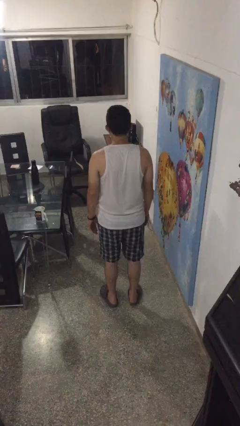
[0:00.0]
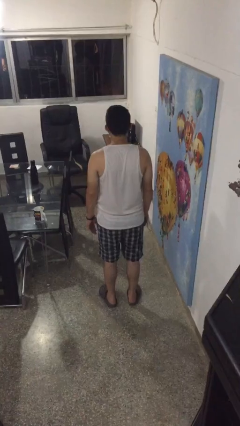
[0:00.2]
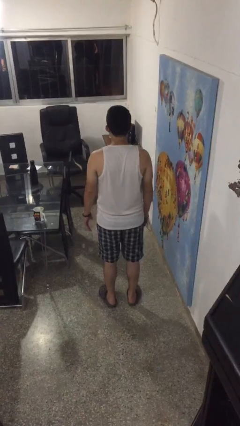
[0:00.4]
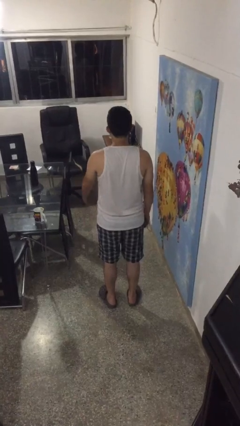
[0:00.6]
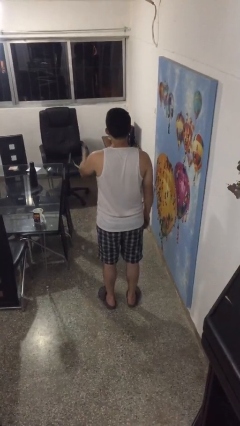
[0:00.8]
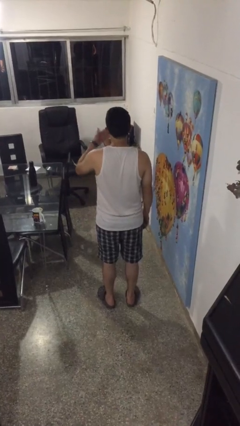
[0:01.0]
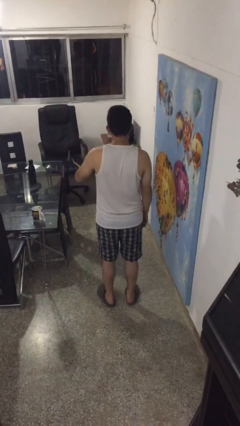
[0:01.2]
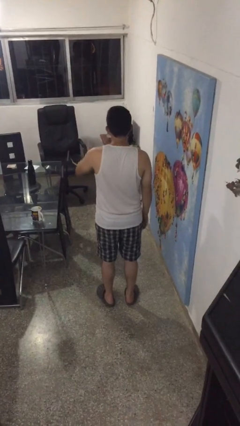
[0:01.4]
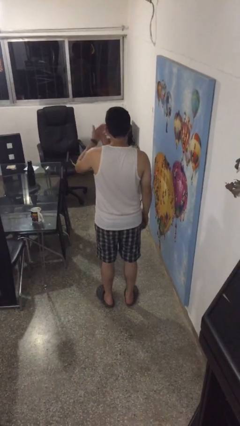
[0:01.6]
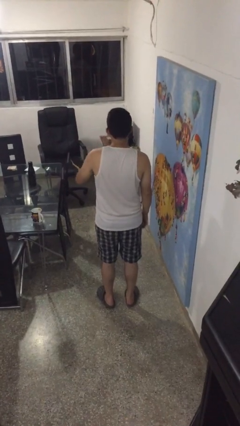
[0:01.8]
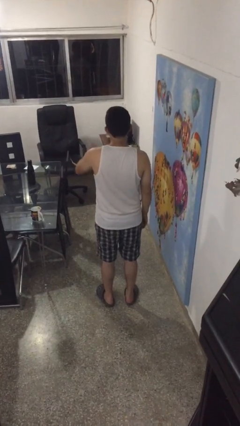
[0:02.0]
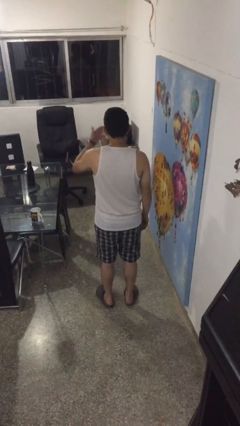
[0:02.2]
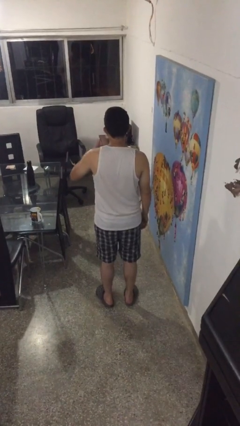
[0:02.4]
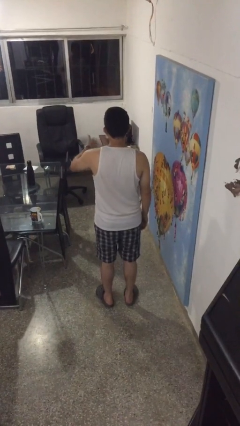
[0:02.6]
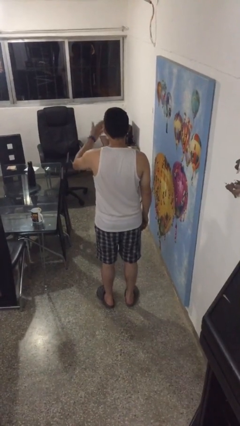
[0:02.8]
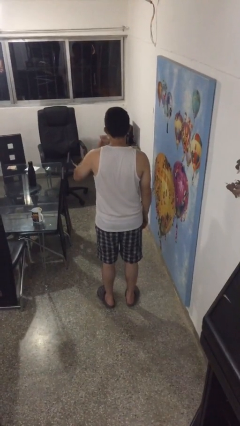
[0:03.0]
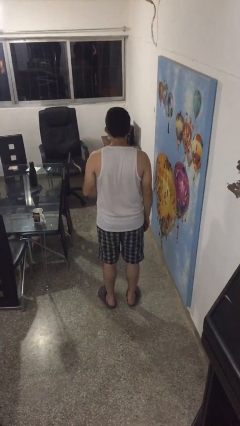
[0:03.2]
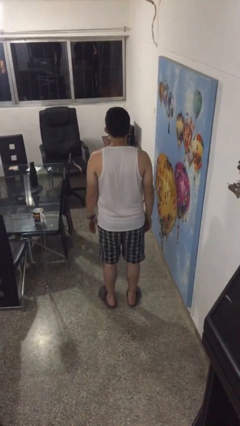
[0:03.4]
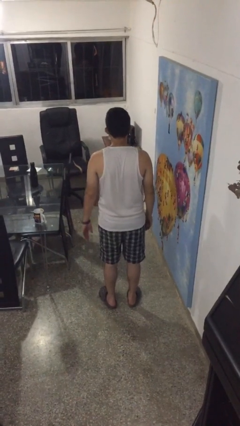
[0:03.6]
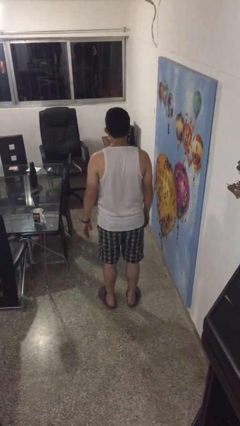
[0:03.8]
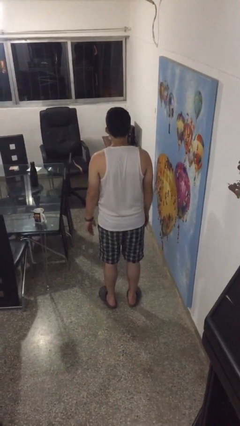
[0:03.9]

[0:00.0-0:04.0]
person gestures come here

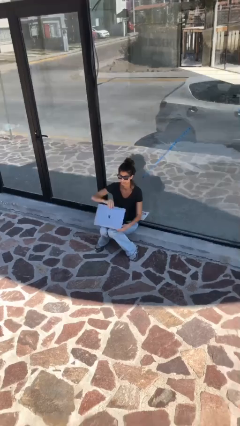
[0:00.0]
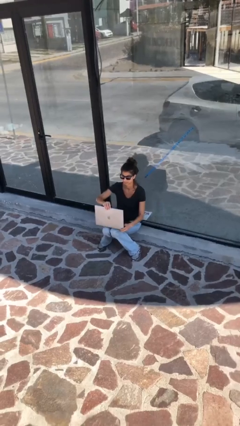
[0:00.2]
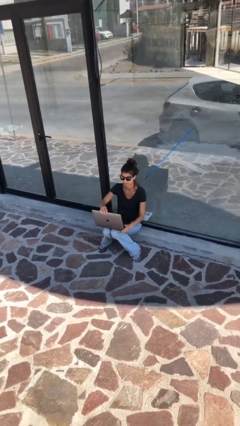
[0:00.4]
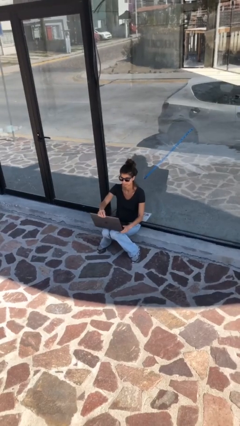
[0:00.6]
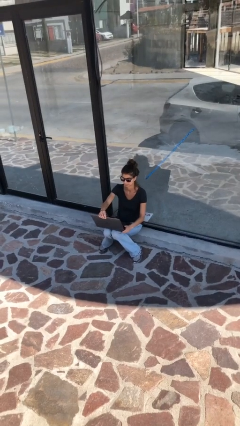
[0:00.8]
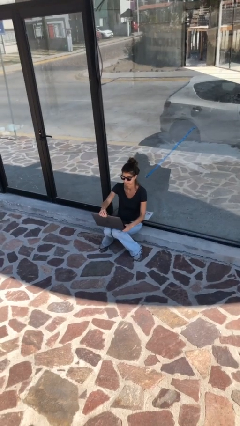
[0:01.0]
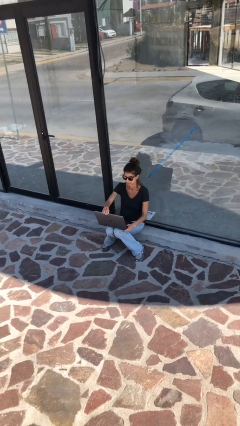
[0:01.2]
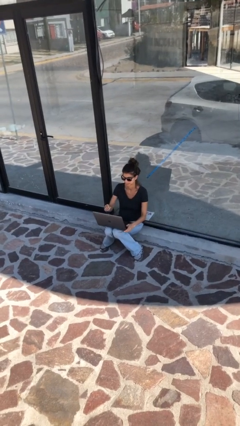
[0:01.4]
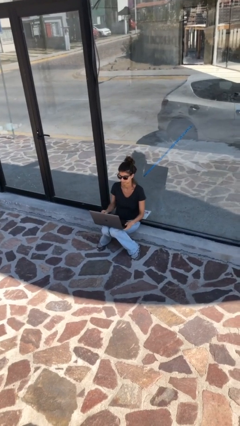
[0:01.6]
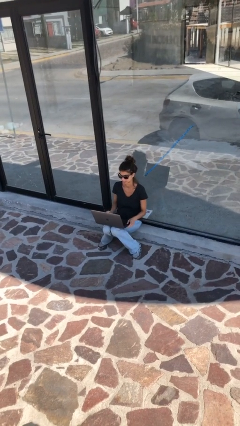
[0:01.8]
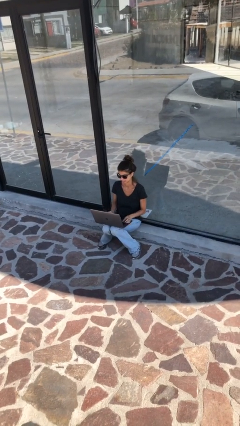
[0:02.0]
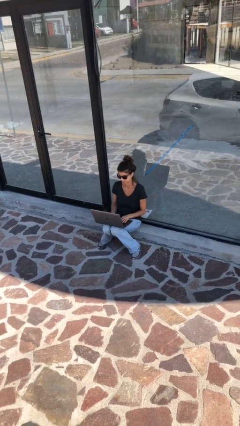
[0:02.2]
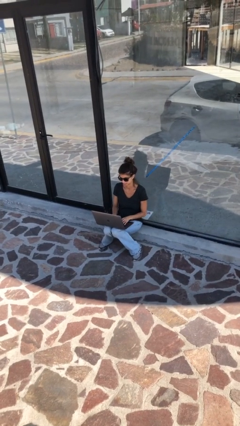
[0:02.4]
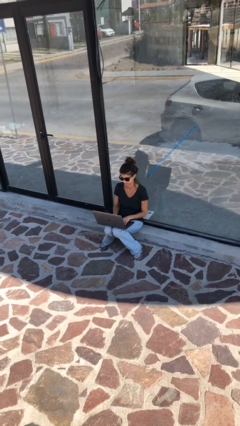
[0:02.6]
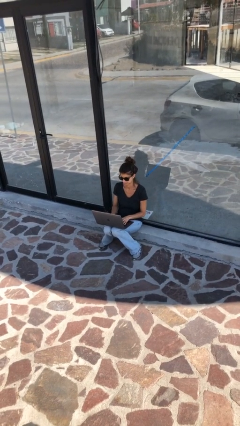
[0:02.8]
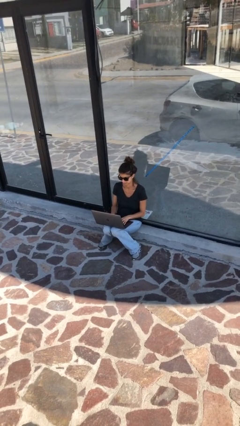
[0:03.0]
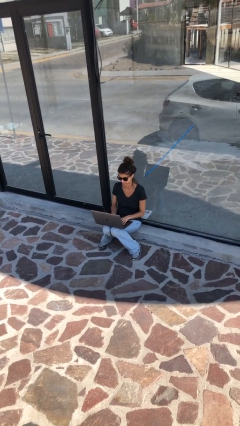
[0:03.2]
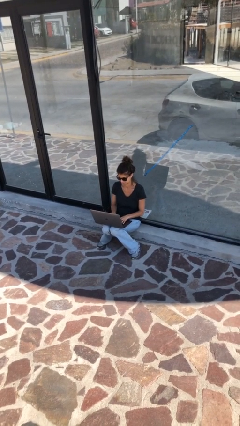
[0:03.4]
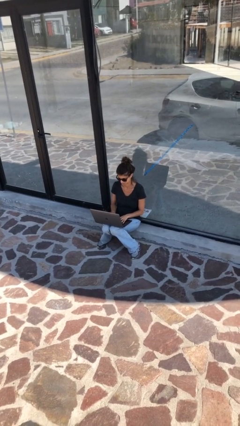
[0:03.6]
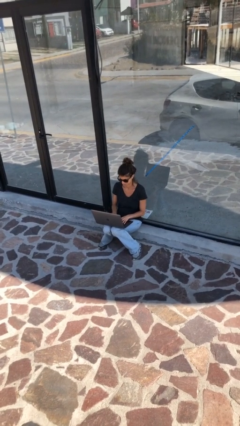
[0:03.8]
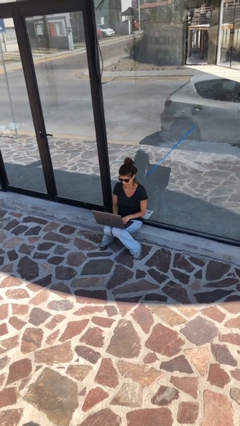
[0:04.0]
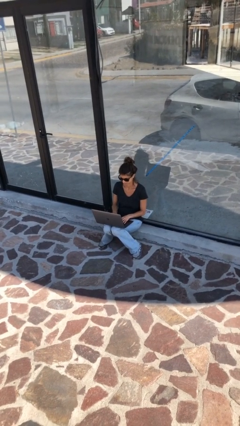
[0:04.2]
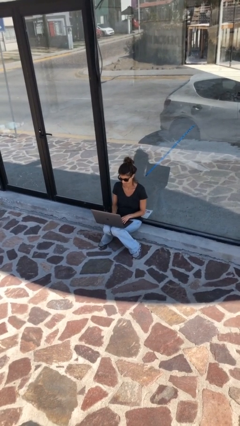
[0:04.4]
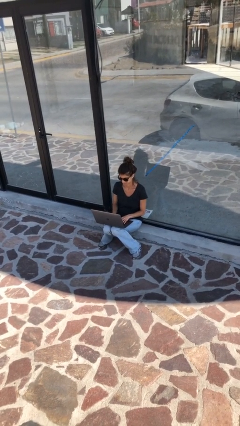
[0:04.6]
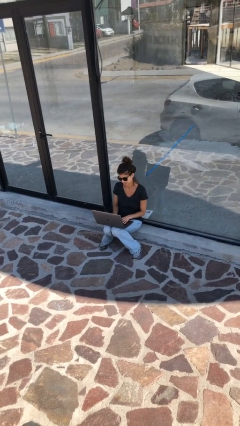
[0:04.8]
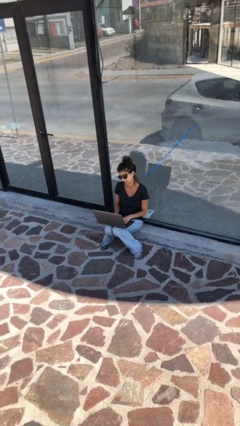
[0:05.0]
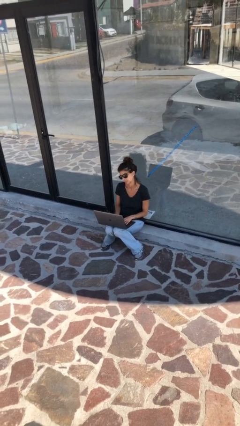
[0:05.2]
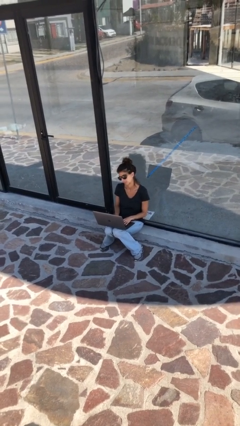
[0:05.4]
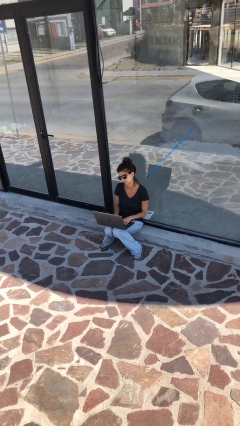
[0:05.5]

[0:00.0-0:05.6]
person interacts with laptop

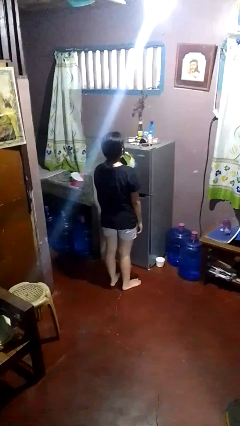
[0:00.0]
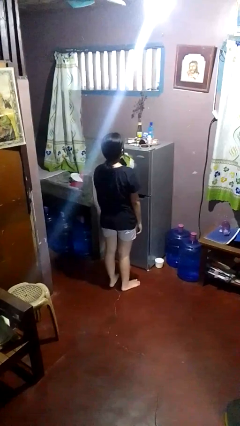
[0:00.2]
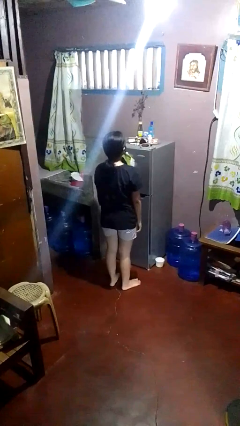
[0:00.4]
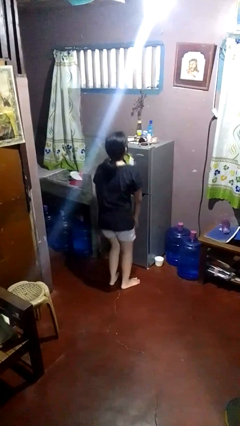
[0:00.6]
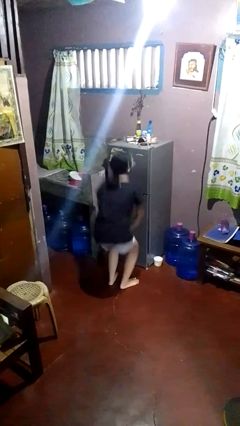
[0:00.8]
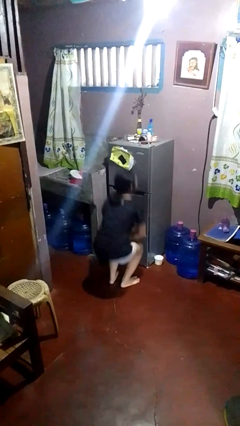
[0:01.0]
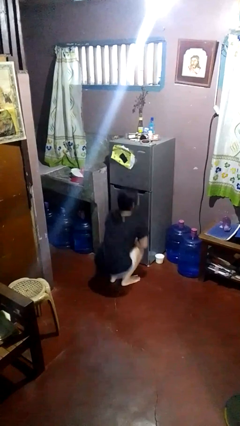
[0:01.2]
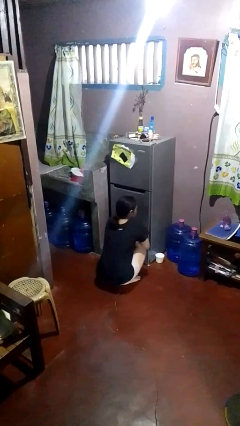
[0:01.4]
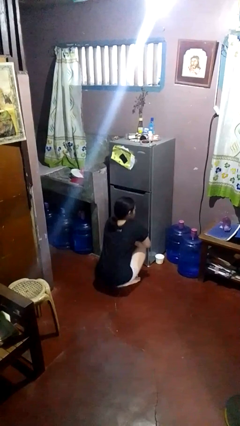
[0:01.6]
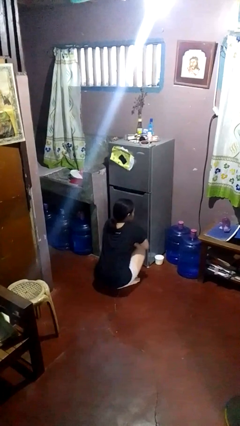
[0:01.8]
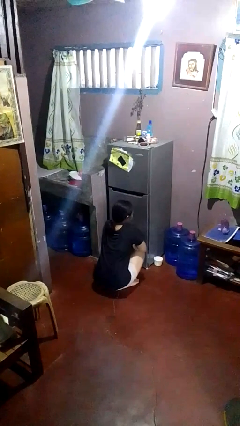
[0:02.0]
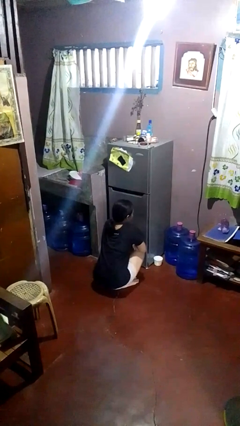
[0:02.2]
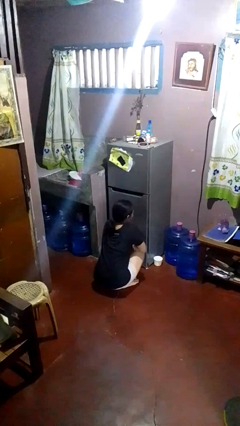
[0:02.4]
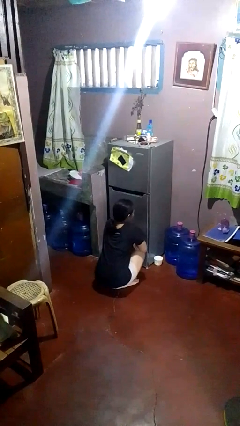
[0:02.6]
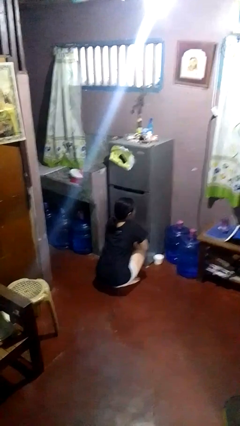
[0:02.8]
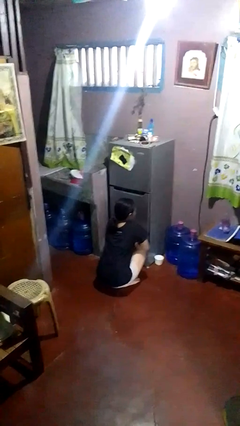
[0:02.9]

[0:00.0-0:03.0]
person squats

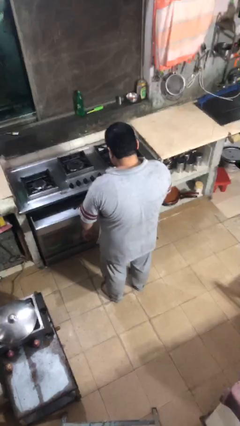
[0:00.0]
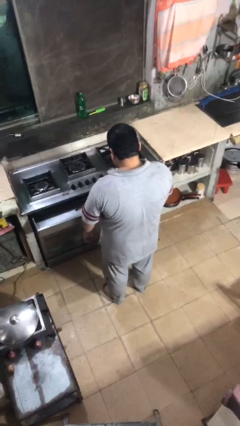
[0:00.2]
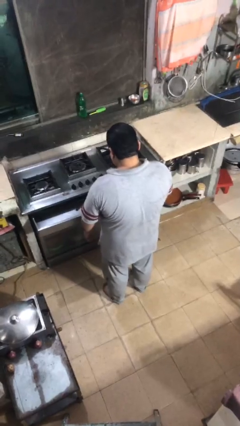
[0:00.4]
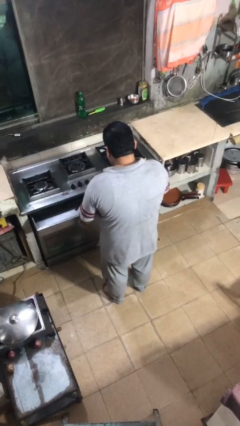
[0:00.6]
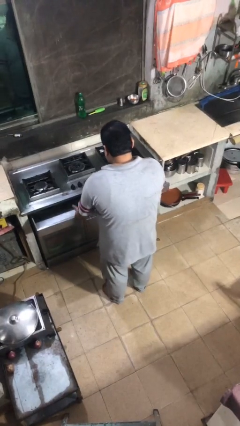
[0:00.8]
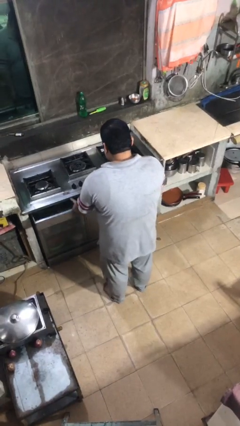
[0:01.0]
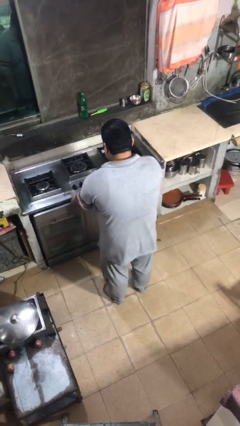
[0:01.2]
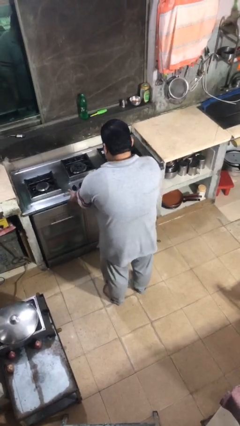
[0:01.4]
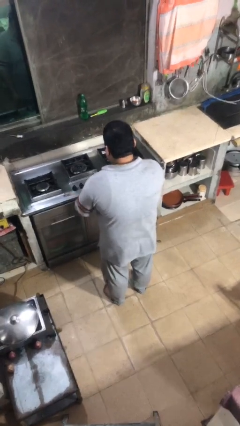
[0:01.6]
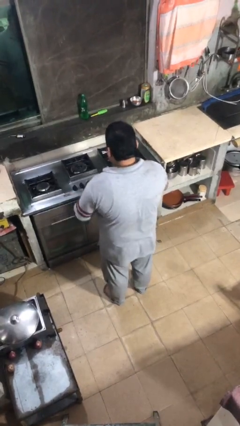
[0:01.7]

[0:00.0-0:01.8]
person closes kitchen drawer

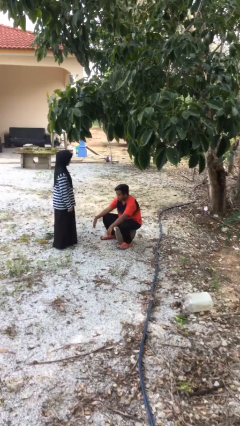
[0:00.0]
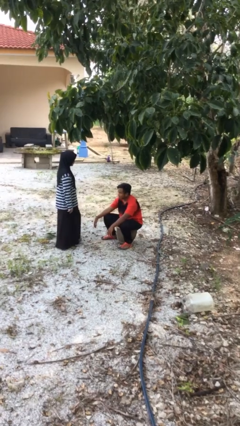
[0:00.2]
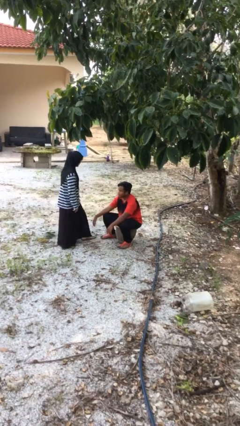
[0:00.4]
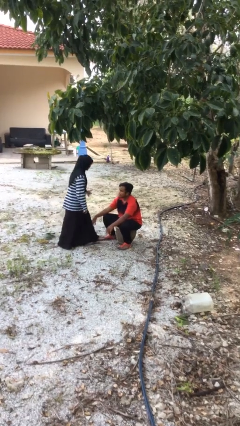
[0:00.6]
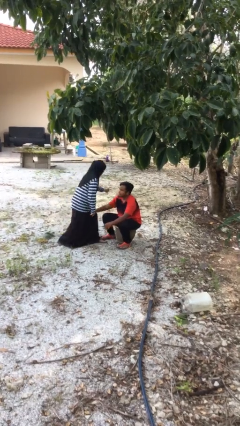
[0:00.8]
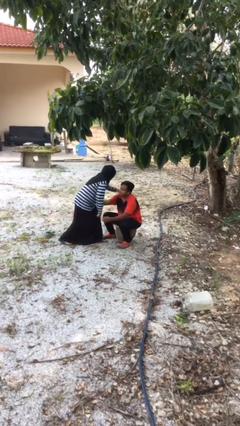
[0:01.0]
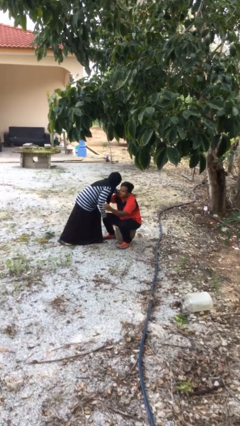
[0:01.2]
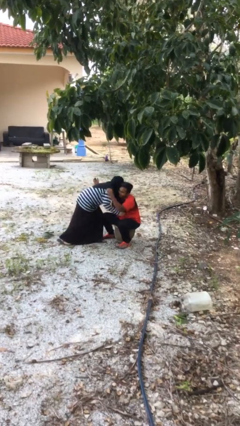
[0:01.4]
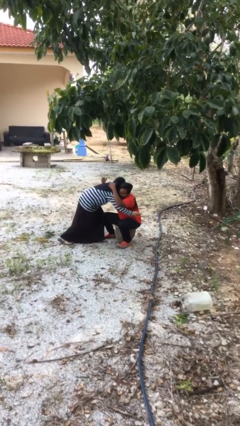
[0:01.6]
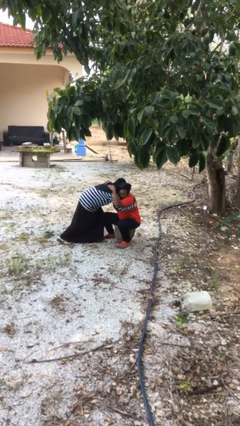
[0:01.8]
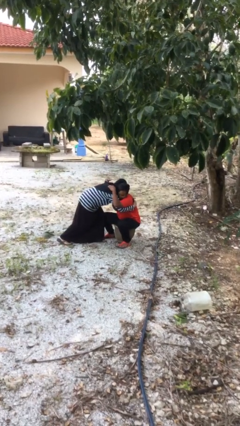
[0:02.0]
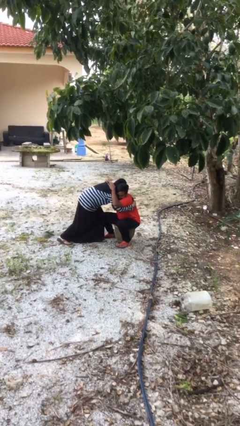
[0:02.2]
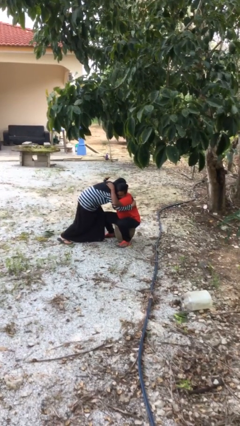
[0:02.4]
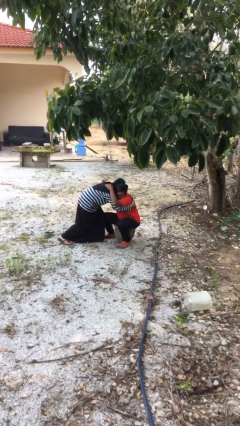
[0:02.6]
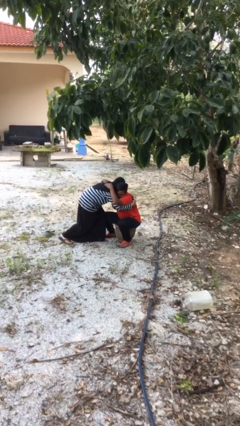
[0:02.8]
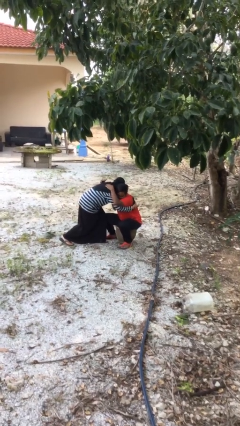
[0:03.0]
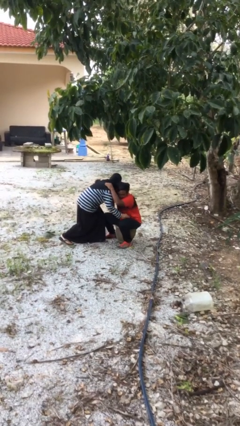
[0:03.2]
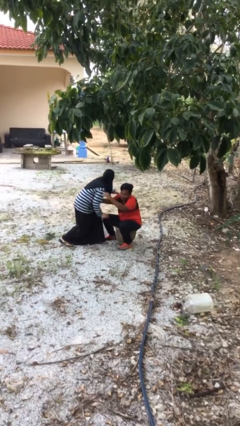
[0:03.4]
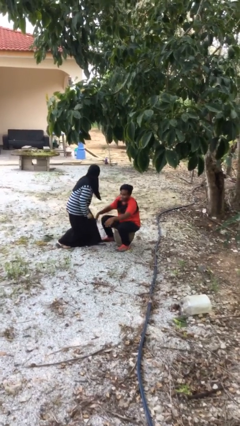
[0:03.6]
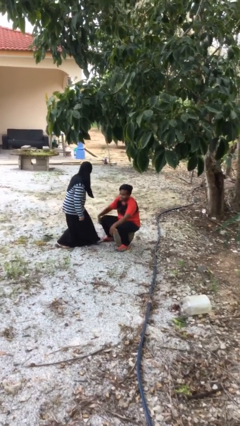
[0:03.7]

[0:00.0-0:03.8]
person embraces person
